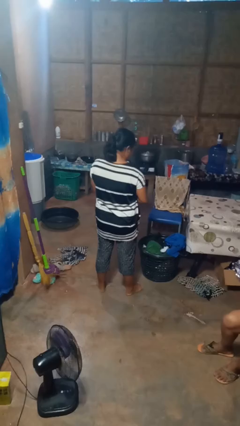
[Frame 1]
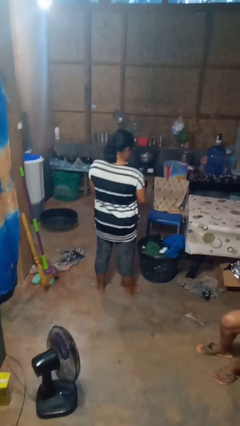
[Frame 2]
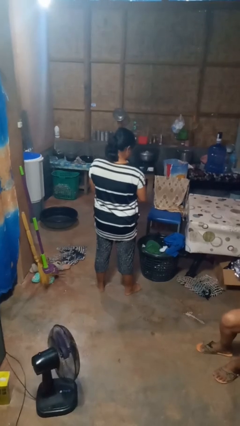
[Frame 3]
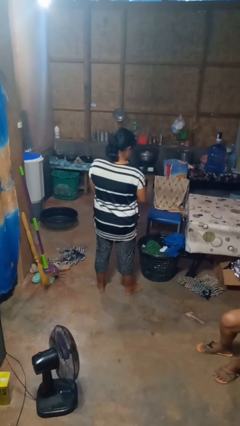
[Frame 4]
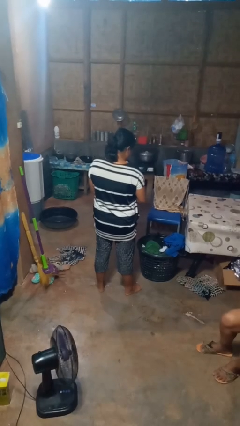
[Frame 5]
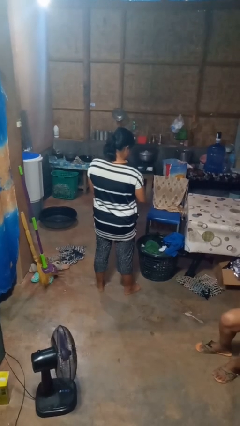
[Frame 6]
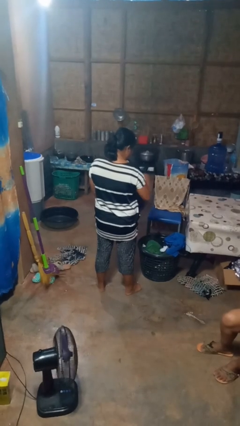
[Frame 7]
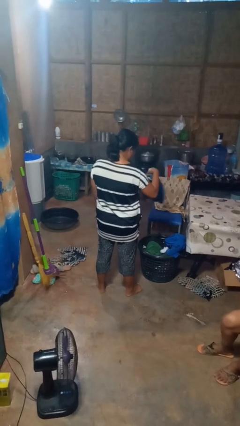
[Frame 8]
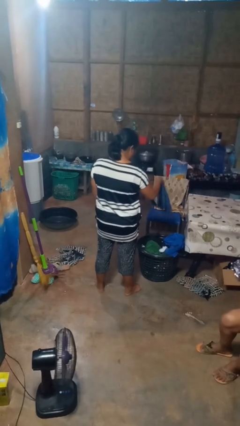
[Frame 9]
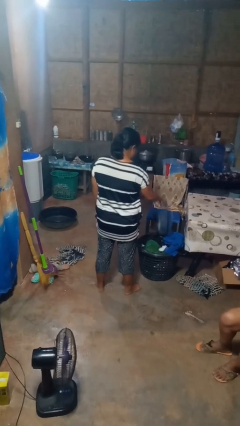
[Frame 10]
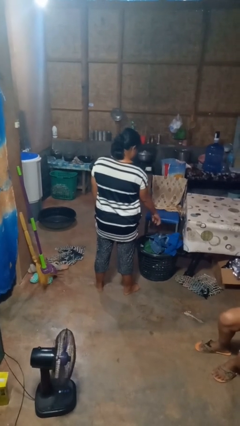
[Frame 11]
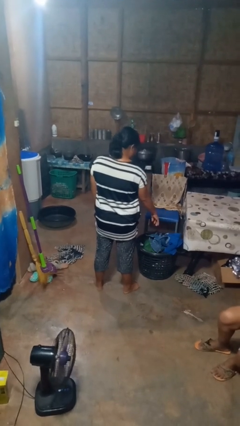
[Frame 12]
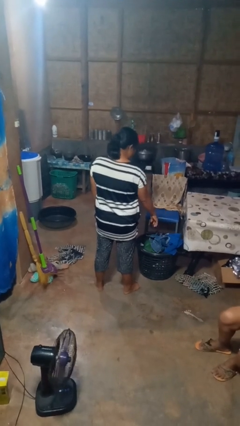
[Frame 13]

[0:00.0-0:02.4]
person puts object into basket

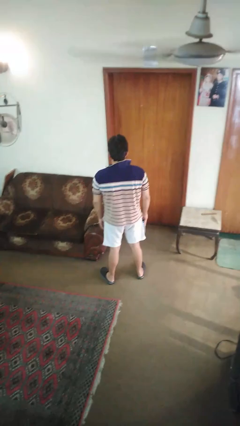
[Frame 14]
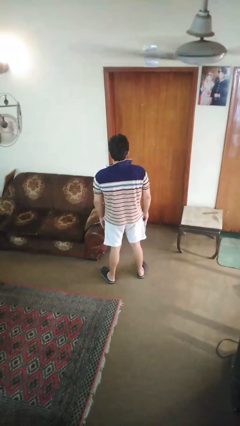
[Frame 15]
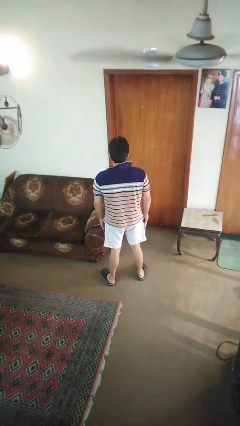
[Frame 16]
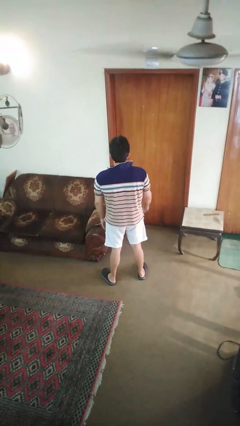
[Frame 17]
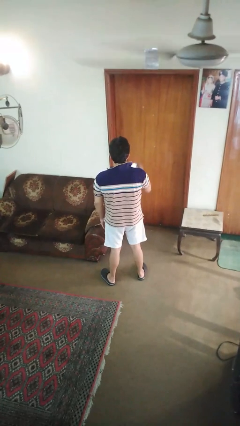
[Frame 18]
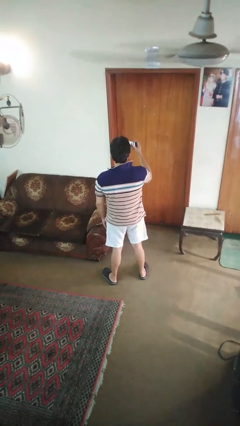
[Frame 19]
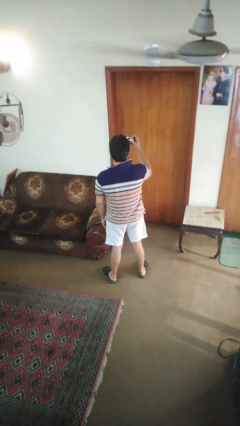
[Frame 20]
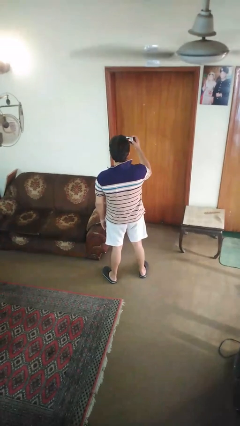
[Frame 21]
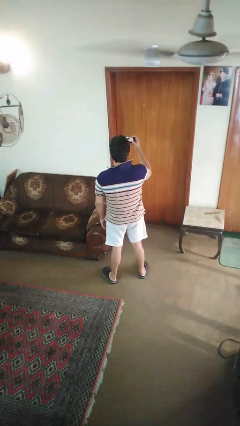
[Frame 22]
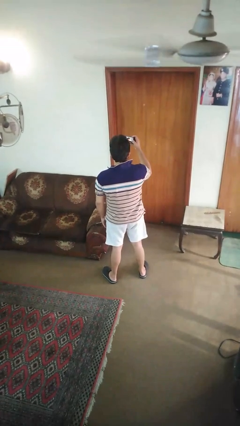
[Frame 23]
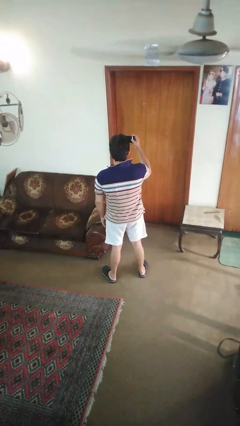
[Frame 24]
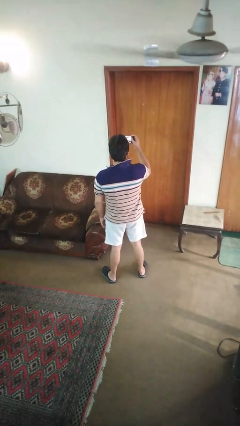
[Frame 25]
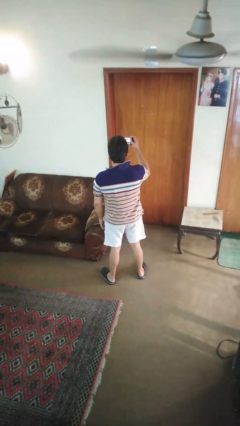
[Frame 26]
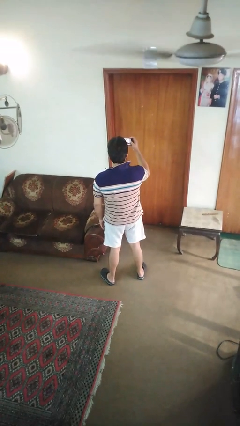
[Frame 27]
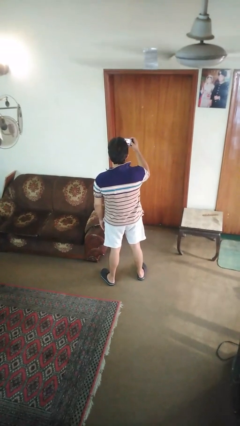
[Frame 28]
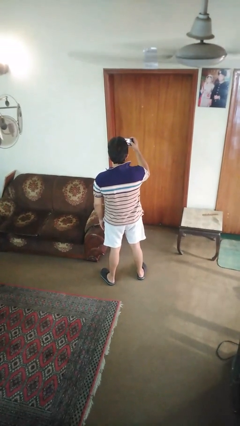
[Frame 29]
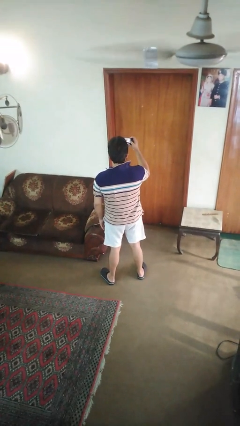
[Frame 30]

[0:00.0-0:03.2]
person takes selfie

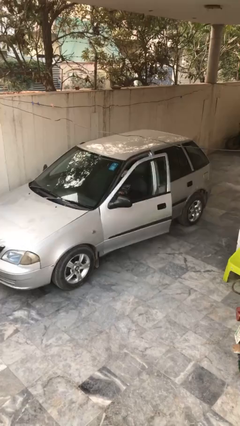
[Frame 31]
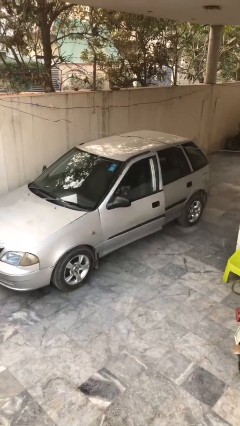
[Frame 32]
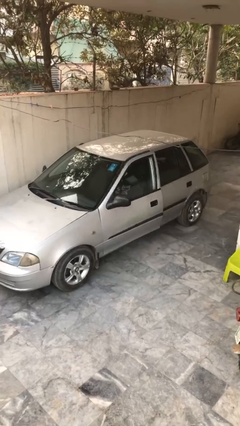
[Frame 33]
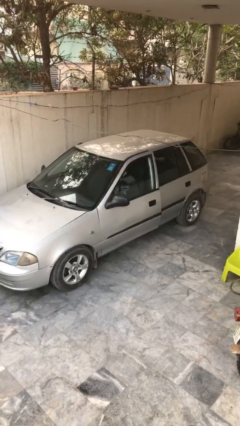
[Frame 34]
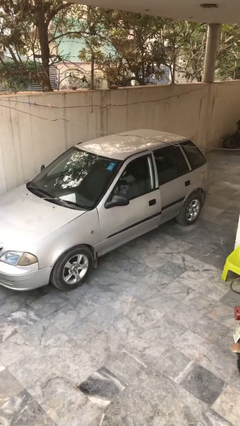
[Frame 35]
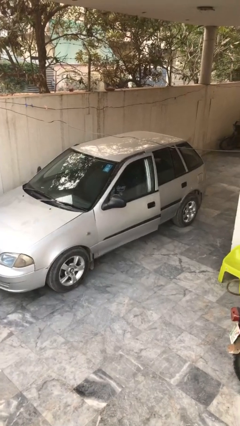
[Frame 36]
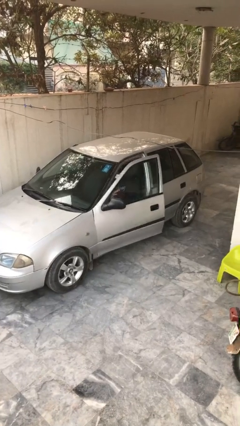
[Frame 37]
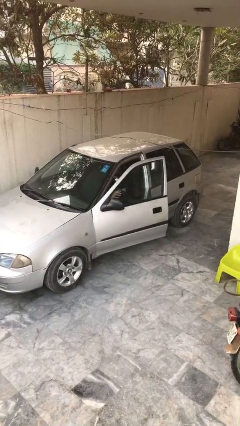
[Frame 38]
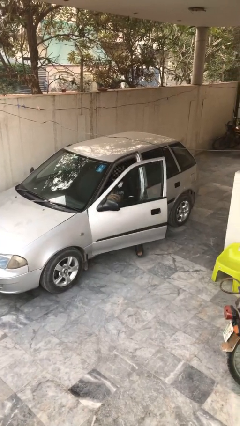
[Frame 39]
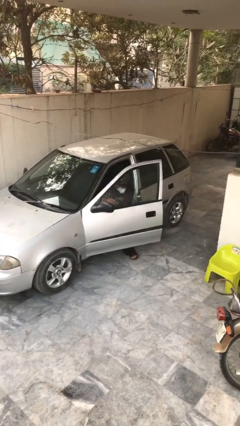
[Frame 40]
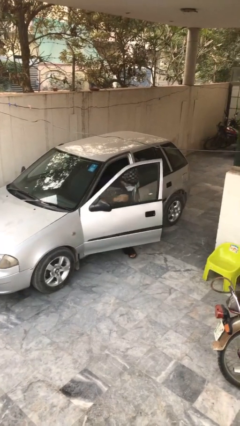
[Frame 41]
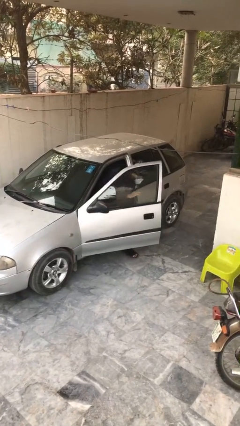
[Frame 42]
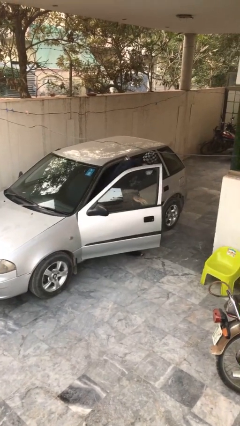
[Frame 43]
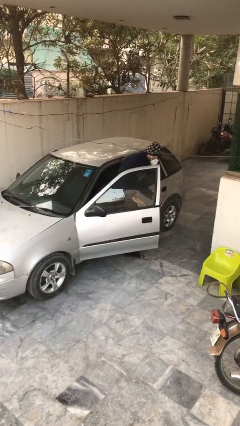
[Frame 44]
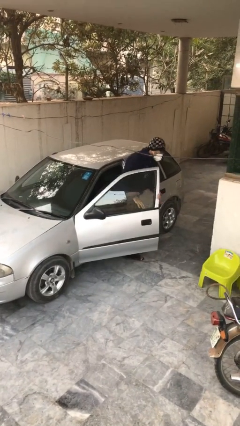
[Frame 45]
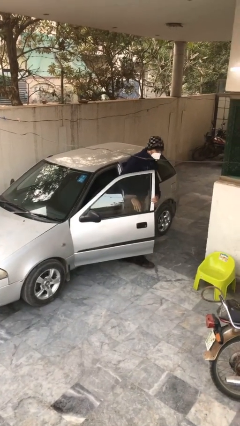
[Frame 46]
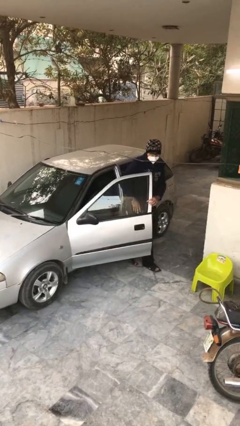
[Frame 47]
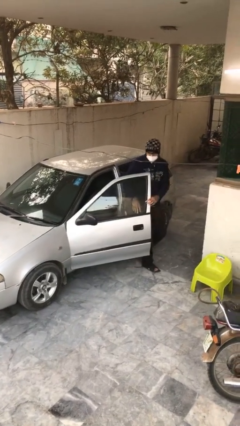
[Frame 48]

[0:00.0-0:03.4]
car drops off person

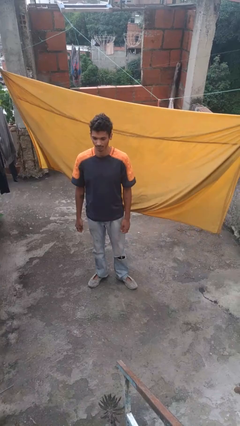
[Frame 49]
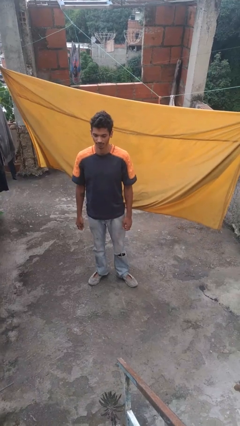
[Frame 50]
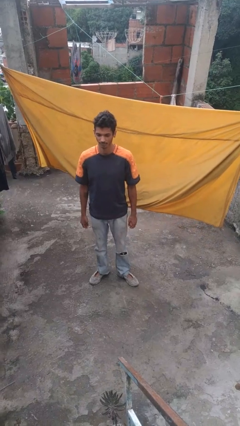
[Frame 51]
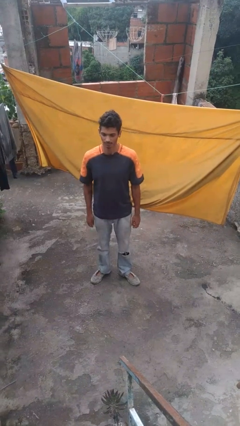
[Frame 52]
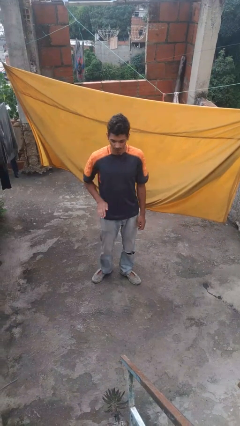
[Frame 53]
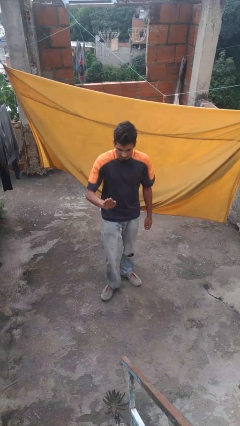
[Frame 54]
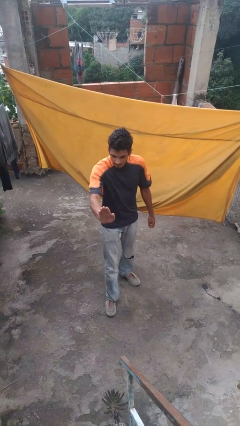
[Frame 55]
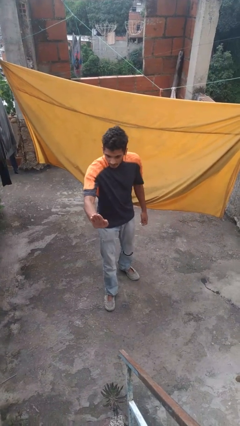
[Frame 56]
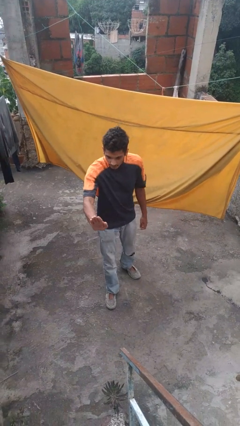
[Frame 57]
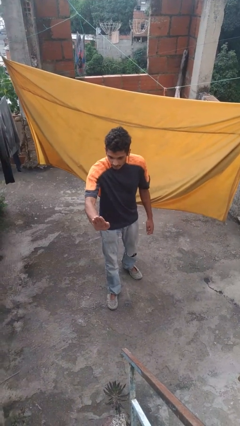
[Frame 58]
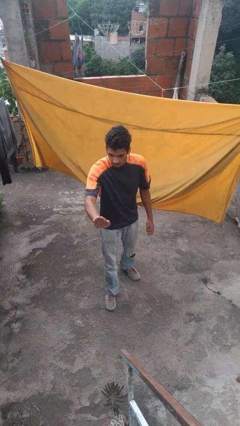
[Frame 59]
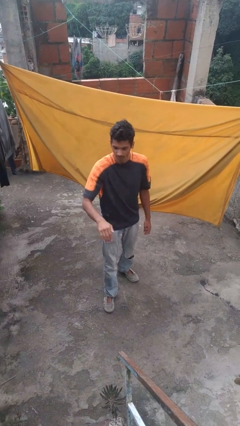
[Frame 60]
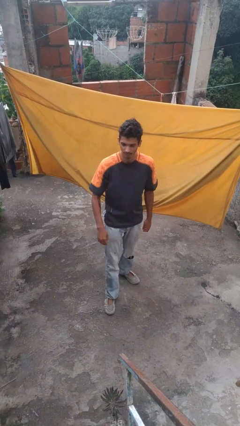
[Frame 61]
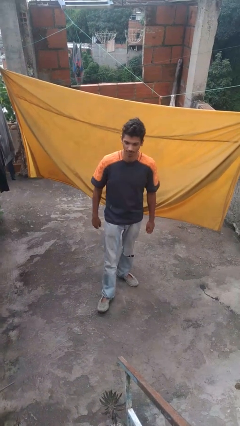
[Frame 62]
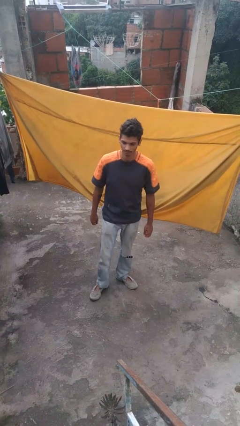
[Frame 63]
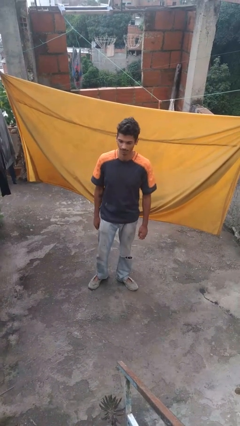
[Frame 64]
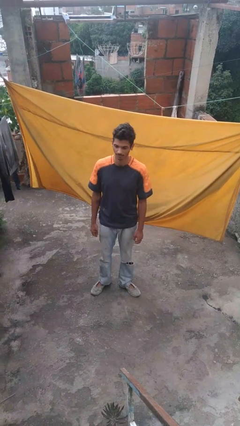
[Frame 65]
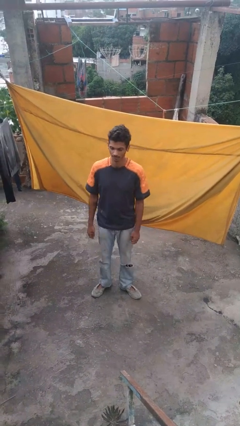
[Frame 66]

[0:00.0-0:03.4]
person gestures stop

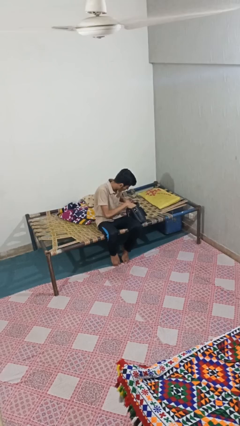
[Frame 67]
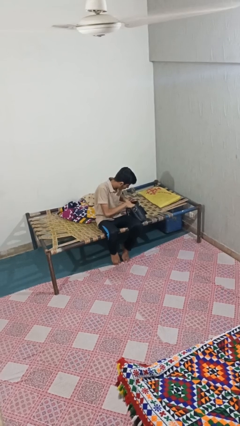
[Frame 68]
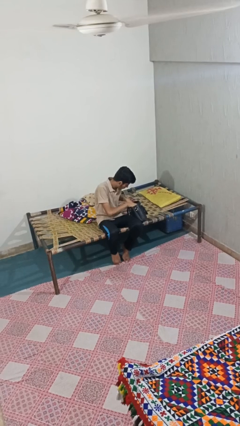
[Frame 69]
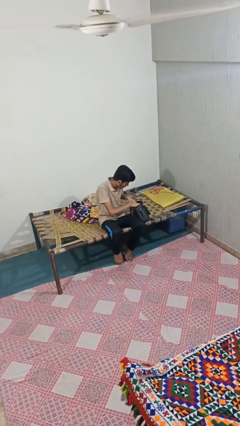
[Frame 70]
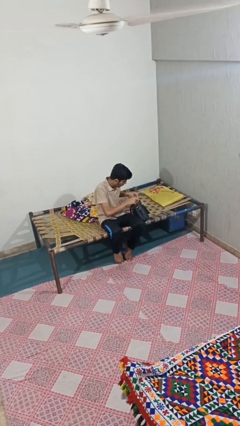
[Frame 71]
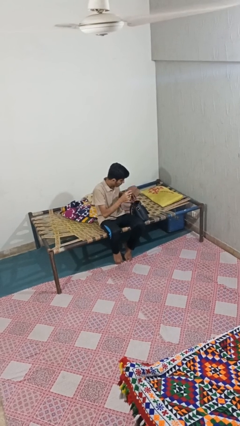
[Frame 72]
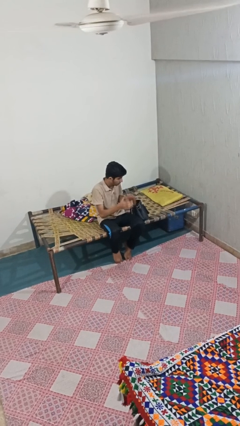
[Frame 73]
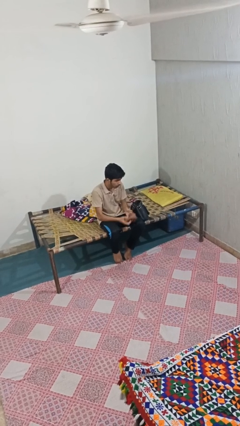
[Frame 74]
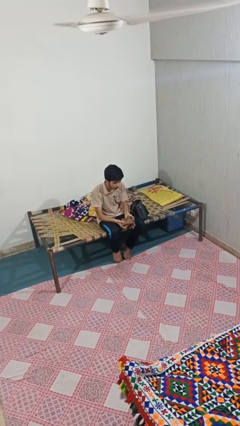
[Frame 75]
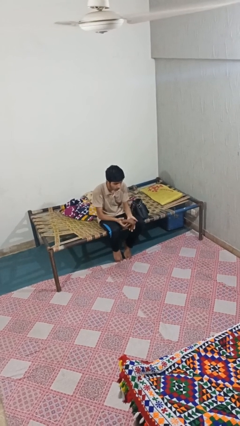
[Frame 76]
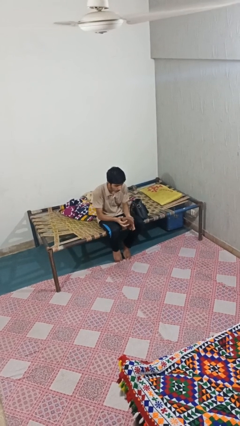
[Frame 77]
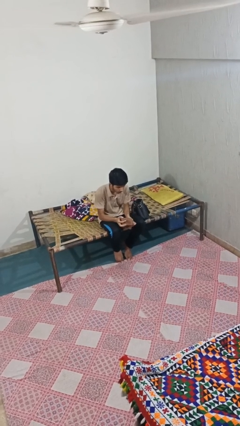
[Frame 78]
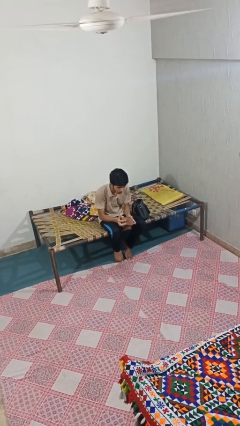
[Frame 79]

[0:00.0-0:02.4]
person takes object from purse

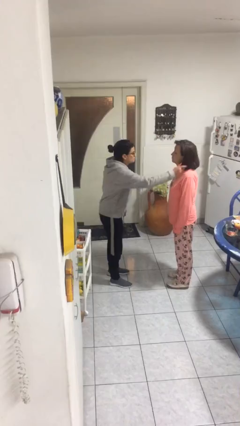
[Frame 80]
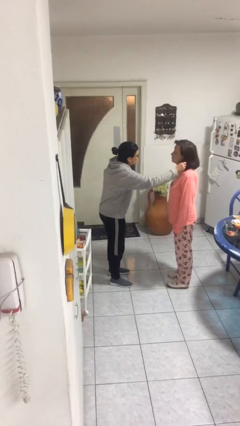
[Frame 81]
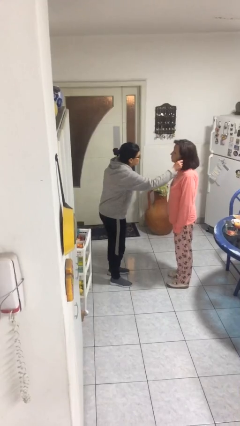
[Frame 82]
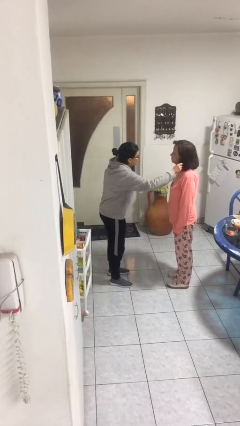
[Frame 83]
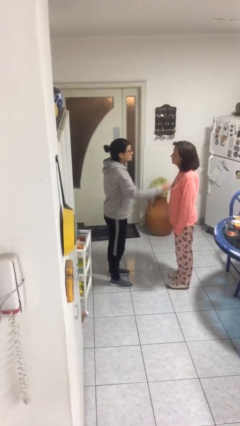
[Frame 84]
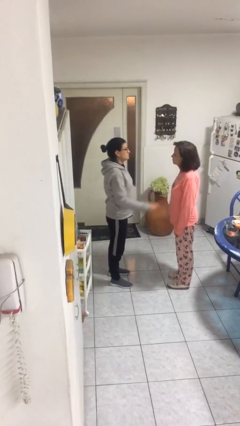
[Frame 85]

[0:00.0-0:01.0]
person grabs person by hair

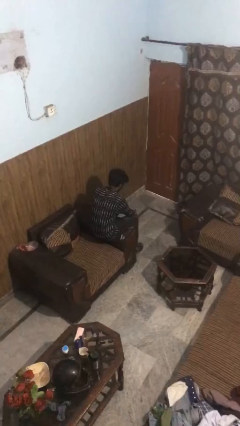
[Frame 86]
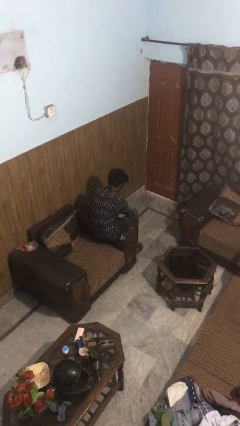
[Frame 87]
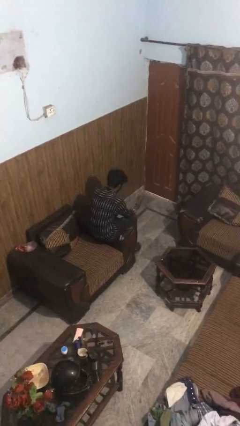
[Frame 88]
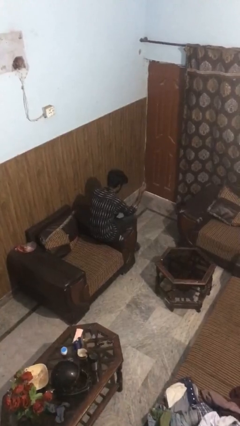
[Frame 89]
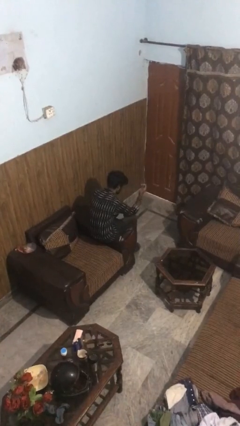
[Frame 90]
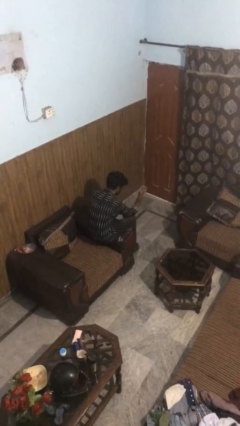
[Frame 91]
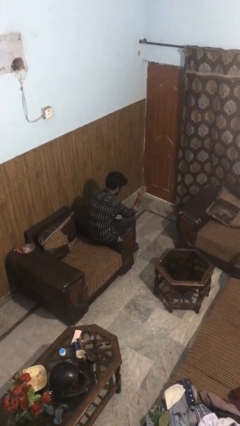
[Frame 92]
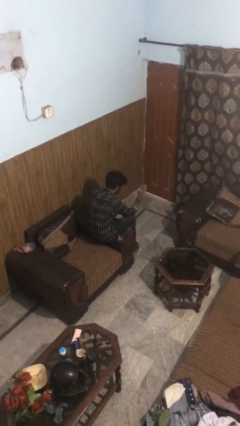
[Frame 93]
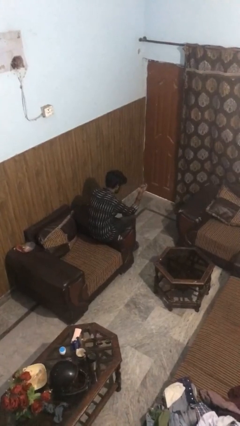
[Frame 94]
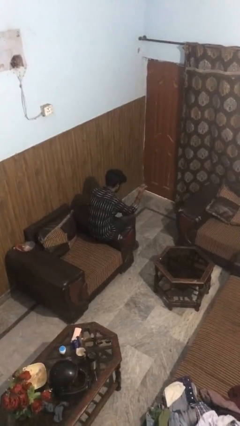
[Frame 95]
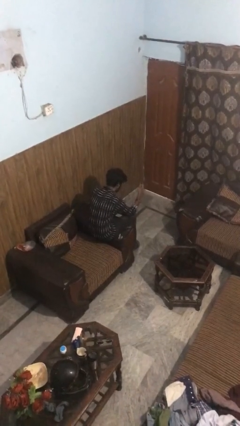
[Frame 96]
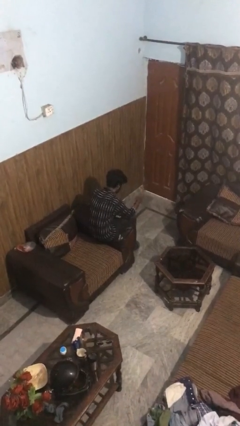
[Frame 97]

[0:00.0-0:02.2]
person snaps fingers
